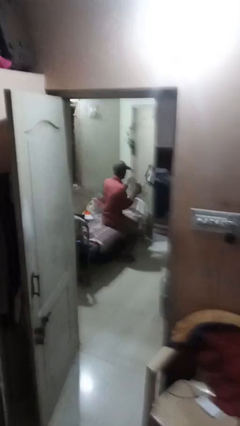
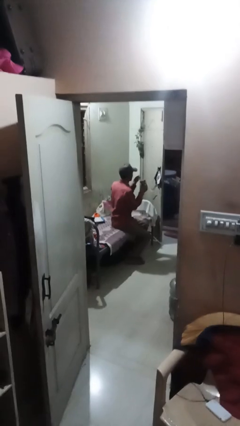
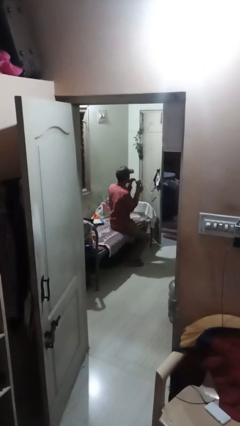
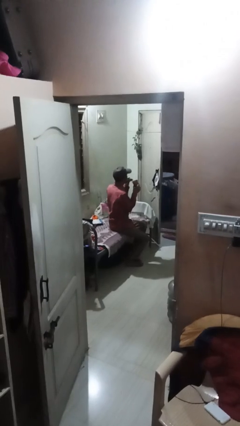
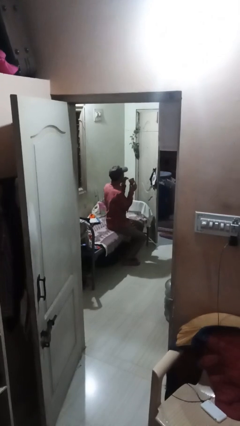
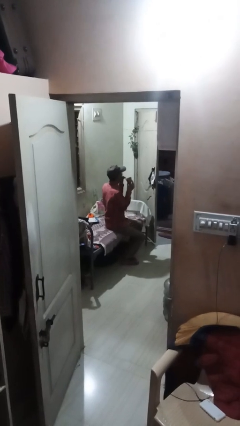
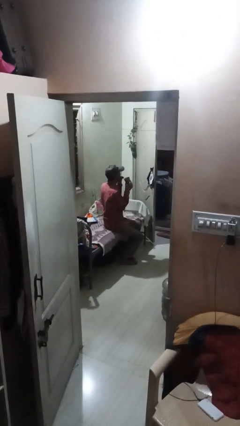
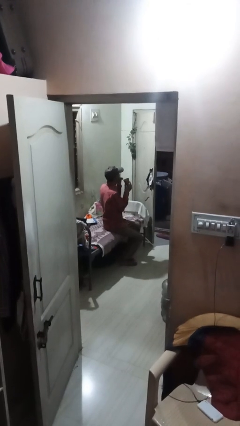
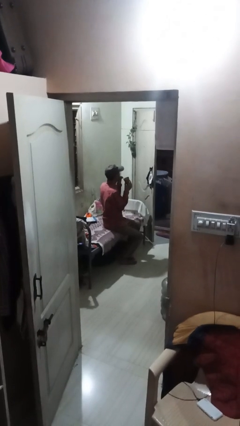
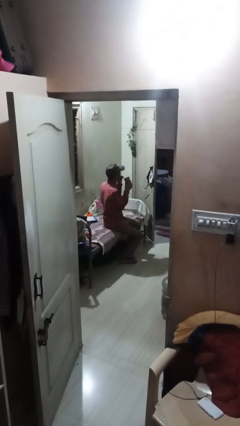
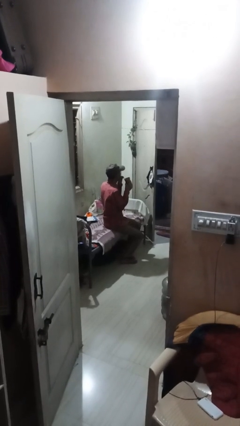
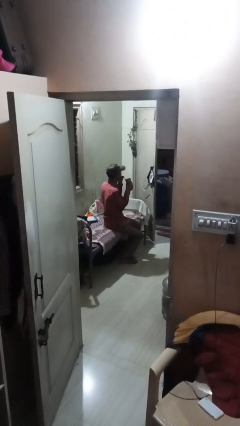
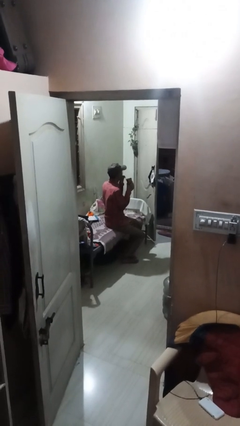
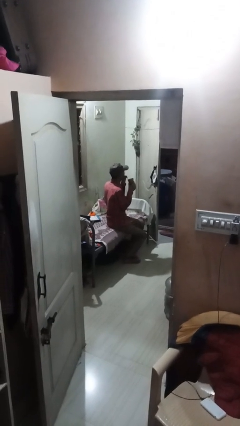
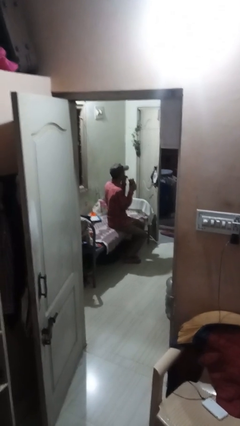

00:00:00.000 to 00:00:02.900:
person drinks from straw

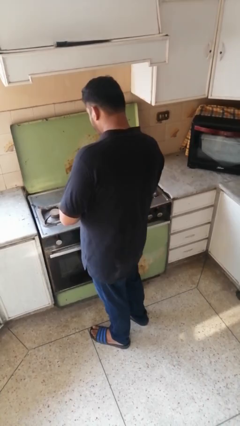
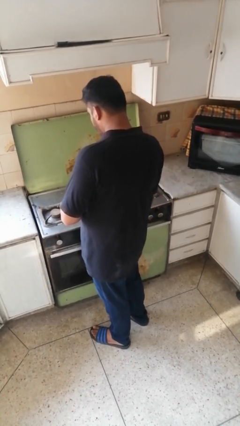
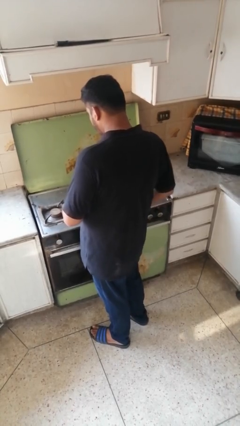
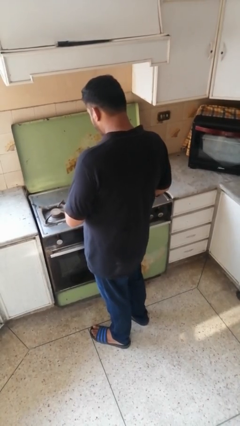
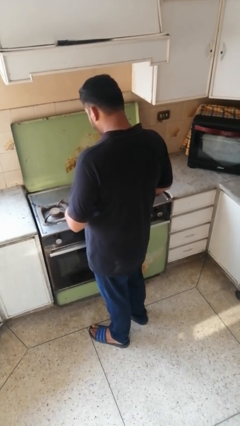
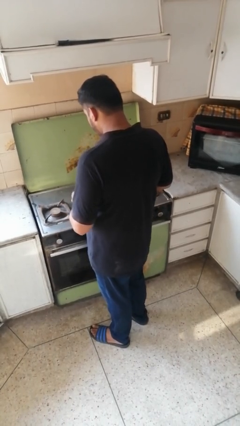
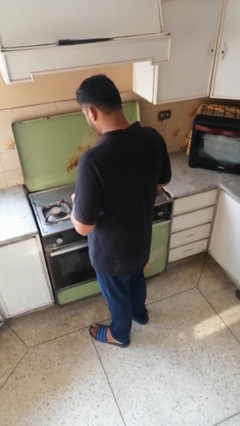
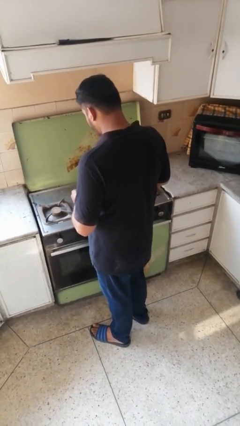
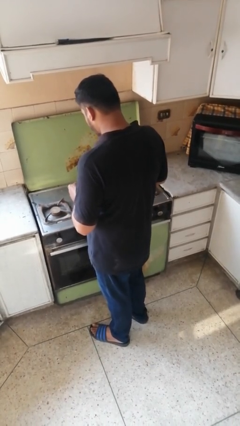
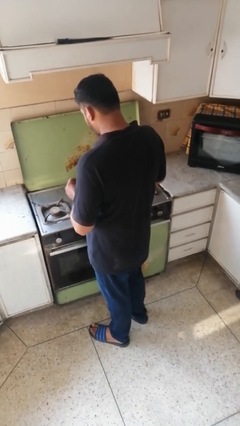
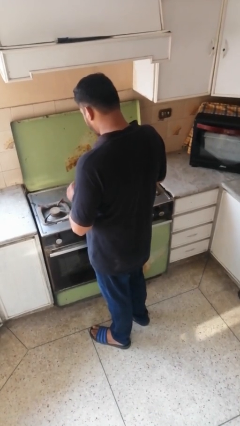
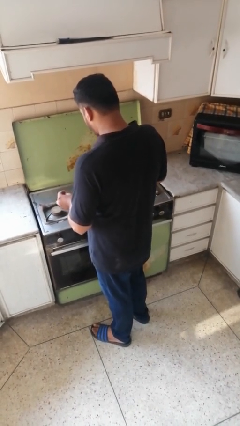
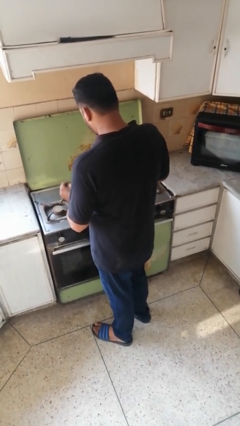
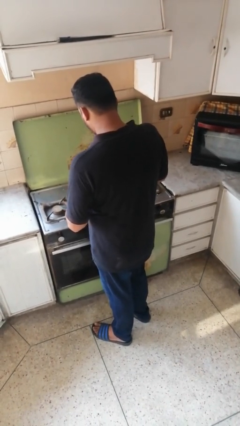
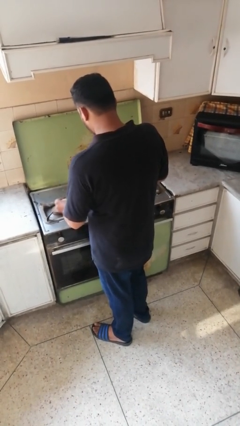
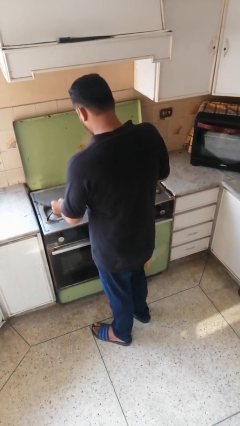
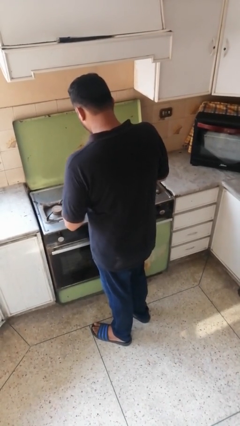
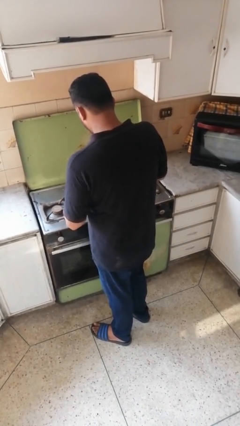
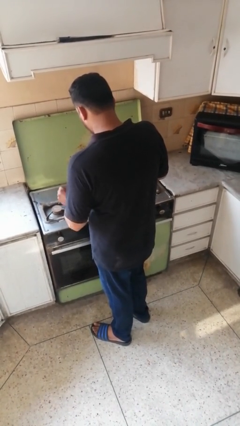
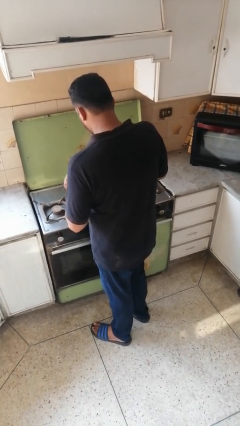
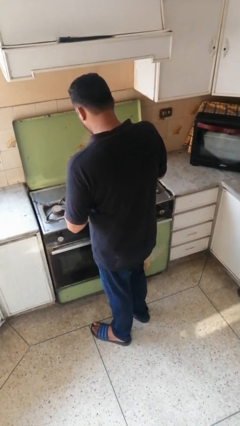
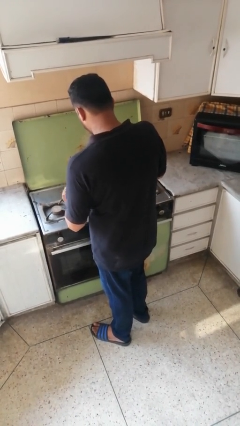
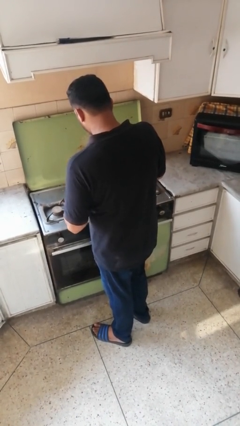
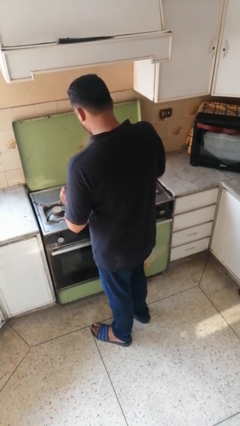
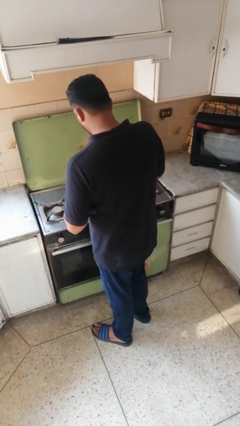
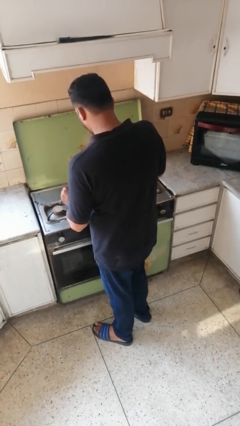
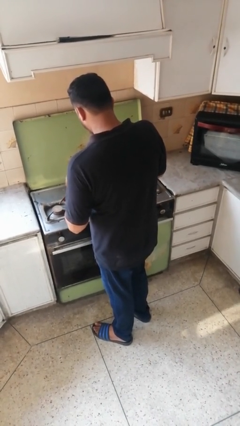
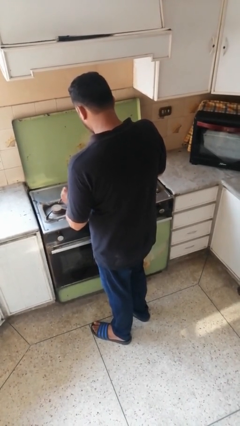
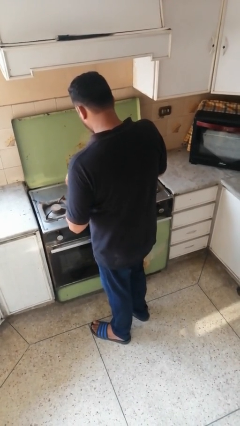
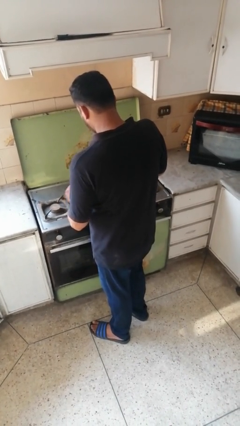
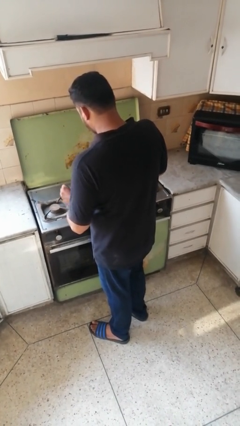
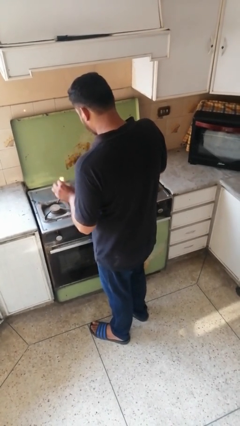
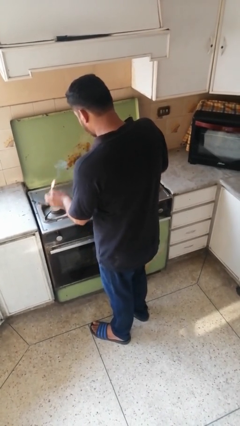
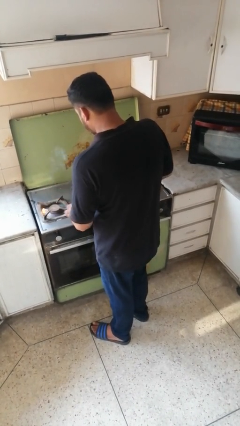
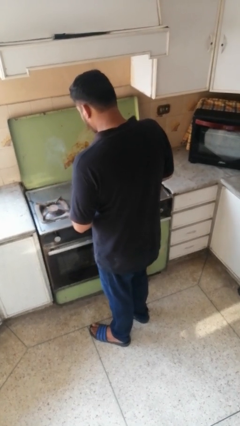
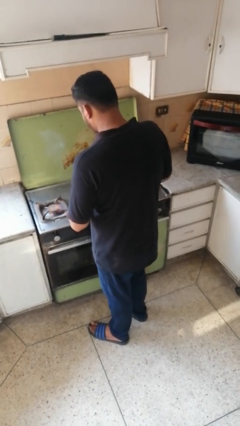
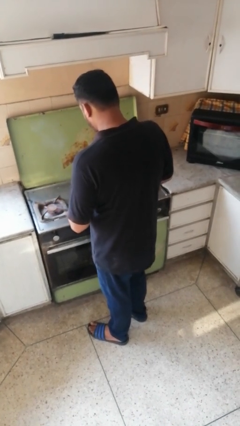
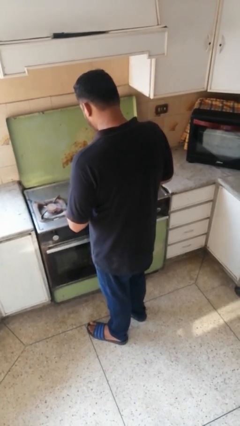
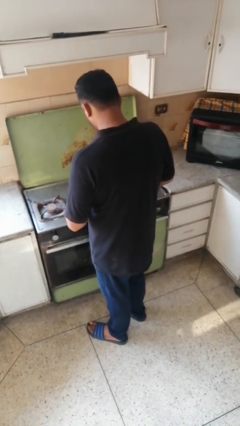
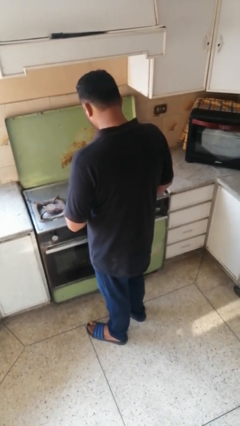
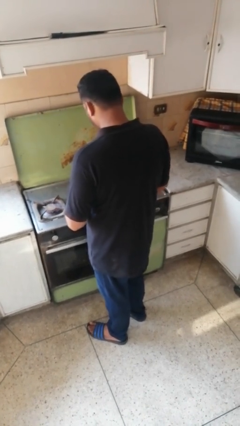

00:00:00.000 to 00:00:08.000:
person turns on stovetop

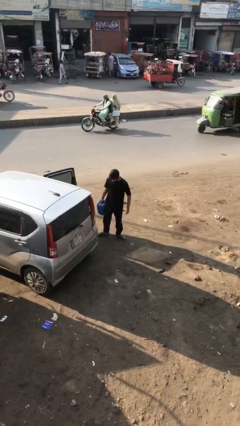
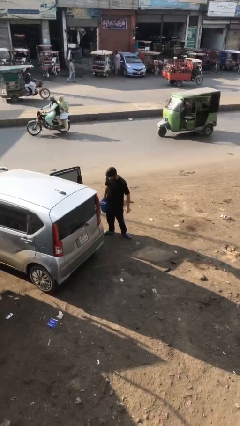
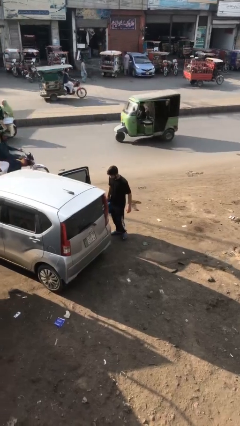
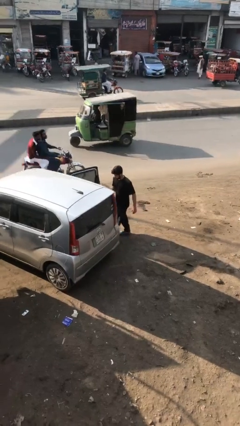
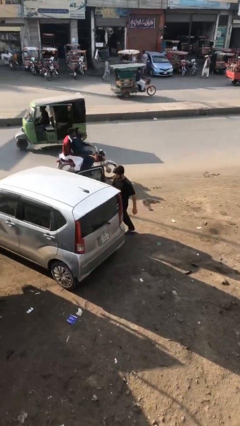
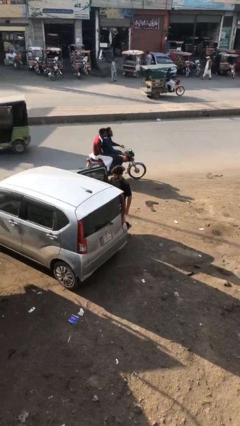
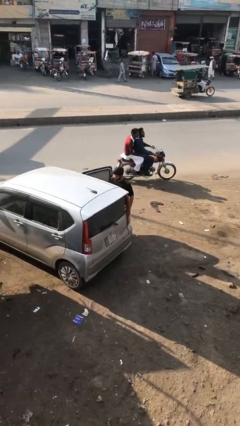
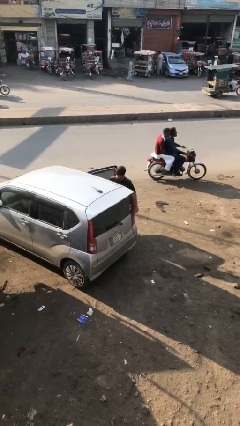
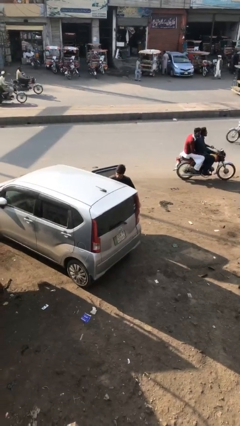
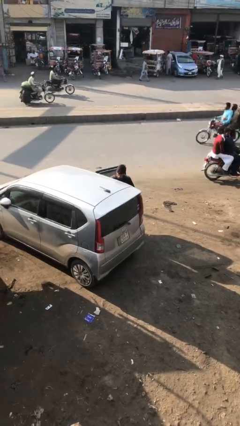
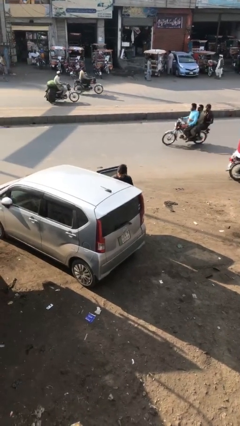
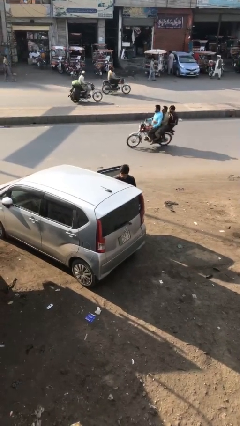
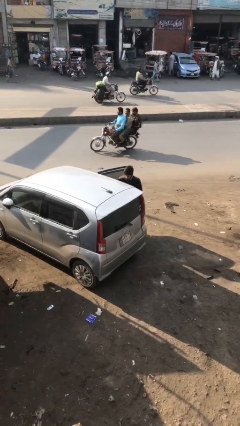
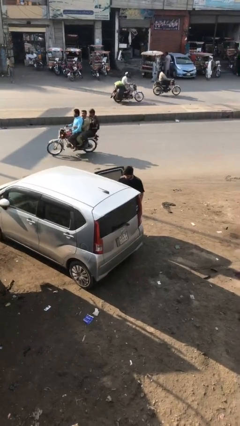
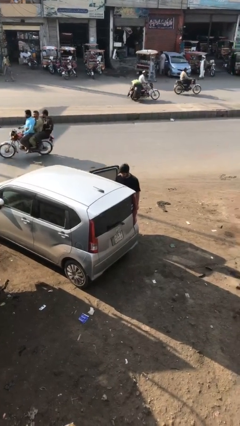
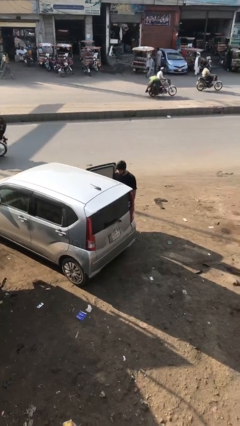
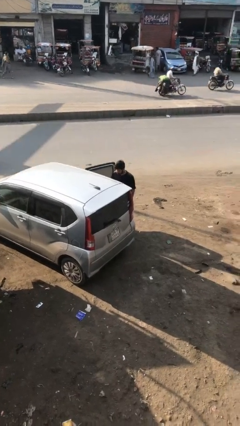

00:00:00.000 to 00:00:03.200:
person loads car

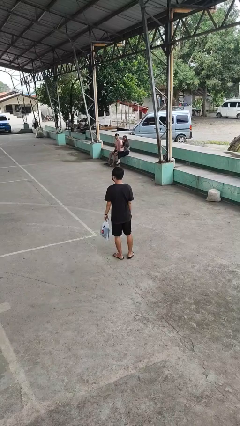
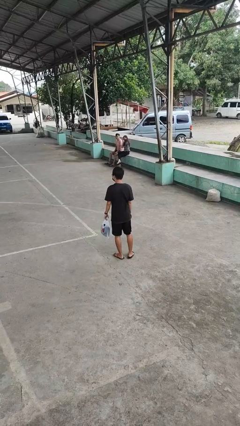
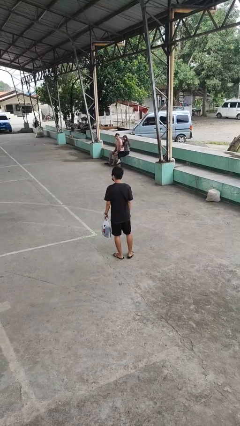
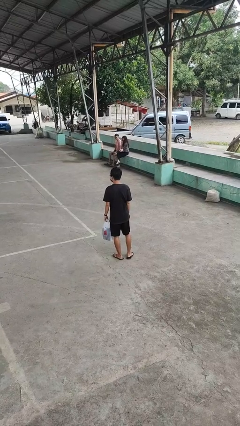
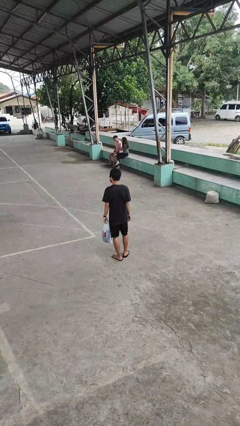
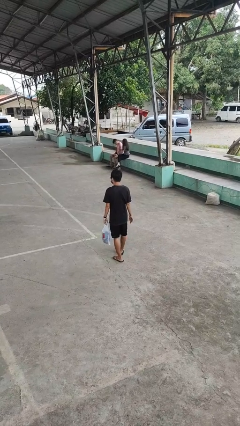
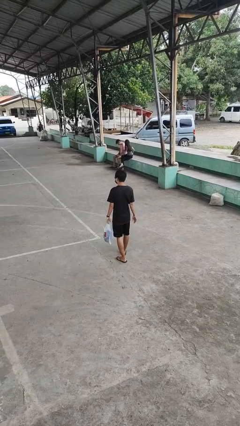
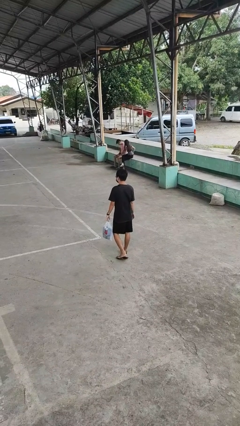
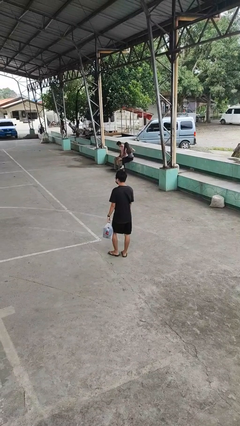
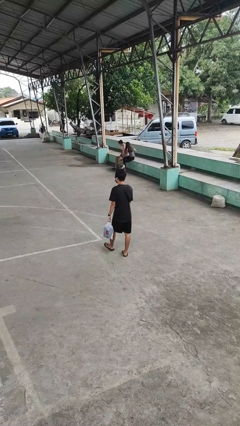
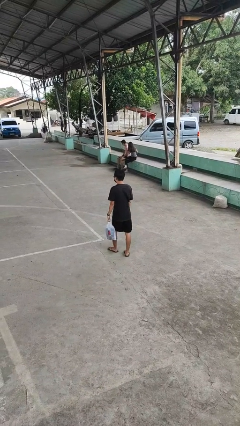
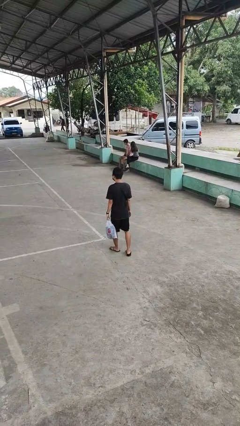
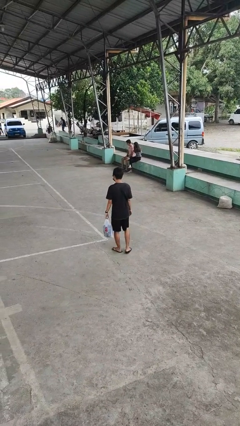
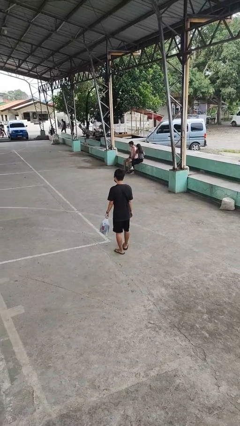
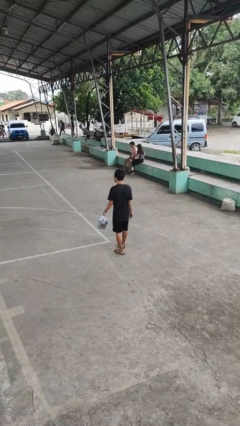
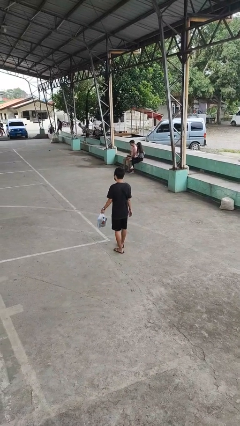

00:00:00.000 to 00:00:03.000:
person carries groceries

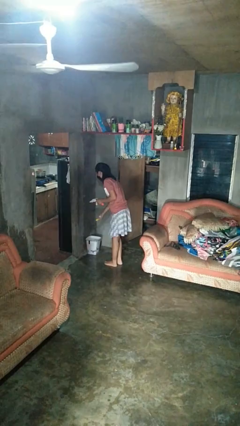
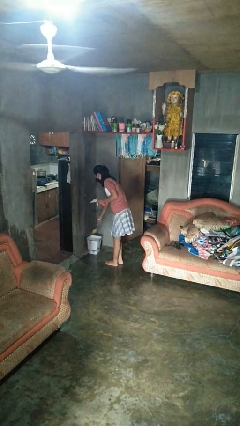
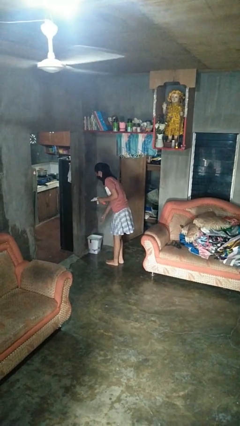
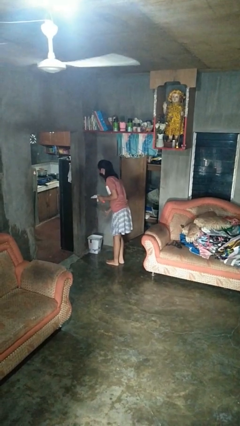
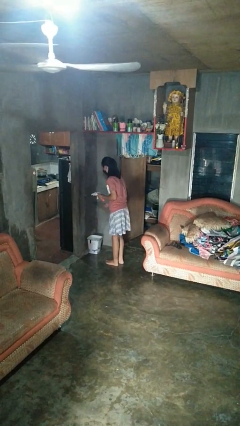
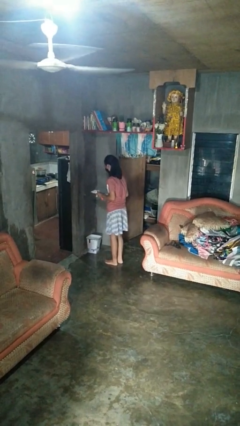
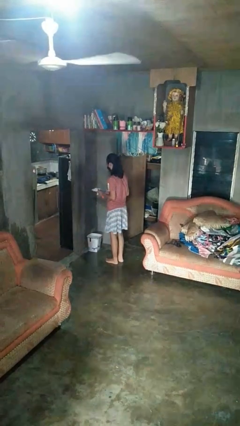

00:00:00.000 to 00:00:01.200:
person discards trash
